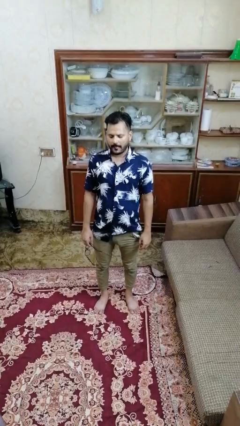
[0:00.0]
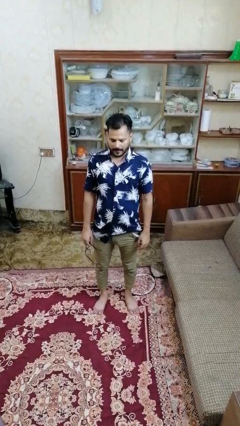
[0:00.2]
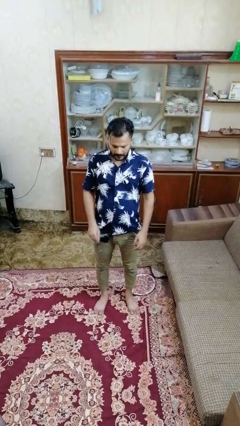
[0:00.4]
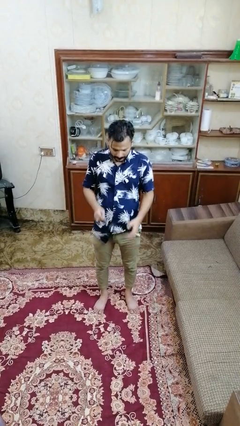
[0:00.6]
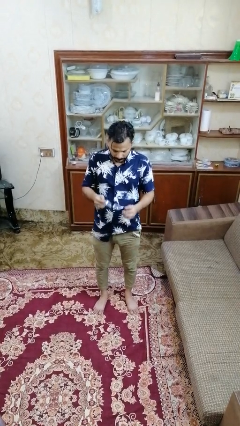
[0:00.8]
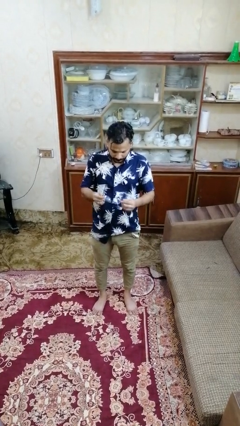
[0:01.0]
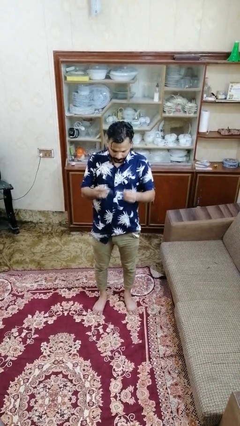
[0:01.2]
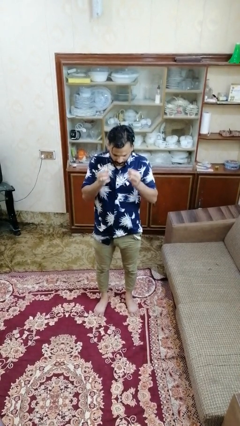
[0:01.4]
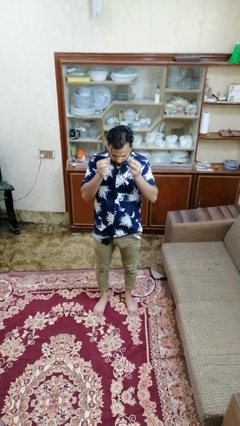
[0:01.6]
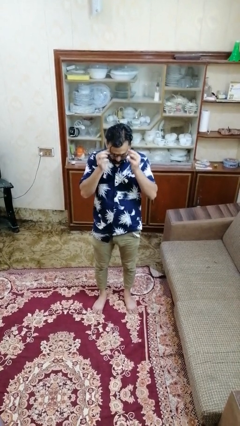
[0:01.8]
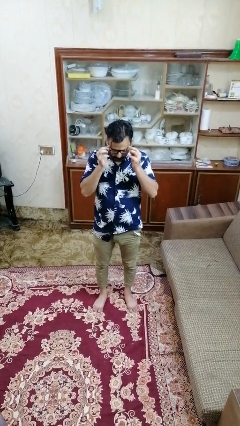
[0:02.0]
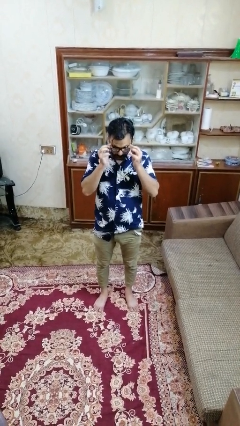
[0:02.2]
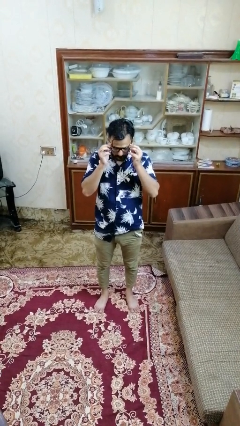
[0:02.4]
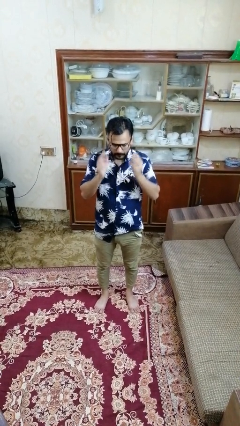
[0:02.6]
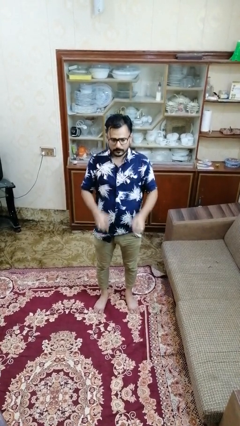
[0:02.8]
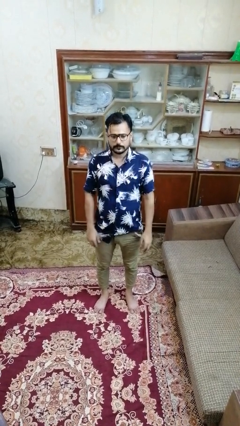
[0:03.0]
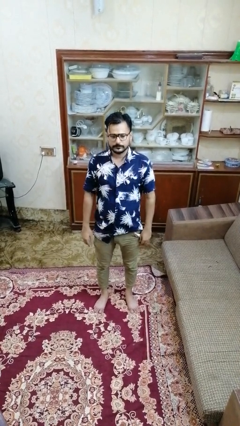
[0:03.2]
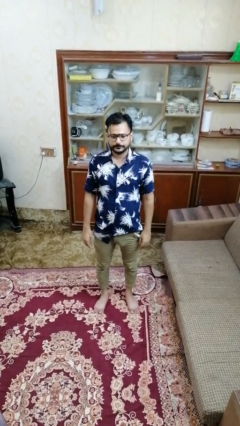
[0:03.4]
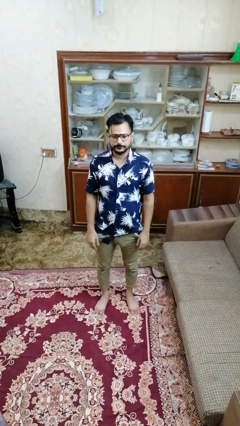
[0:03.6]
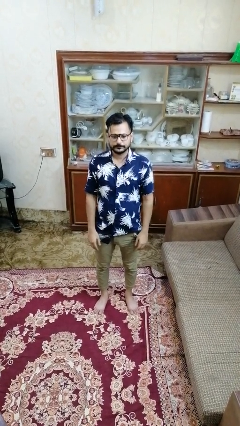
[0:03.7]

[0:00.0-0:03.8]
person puts on glasses

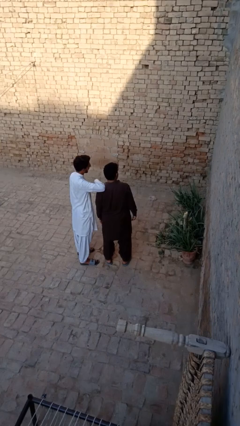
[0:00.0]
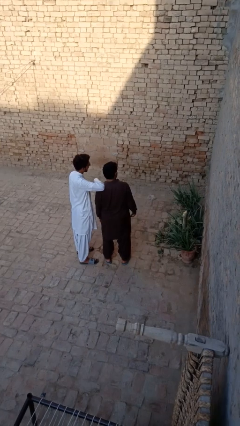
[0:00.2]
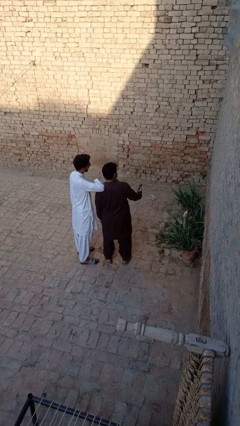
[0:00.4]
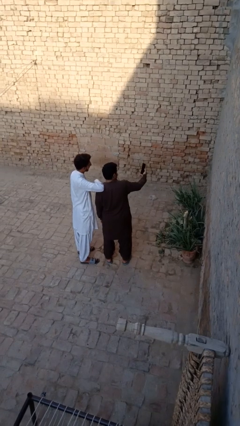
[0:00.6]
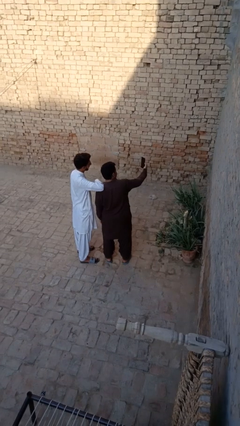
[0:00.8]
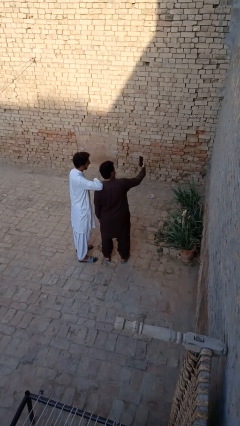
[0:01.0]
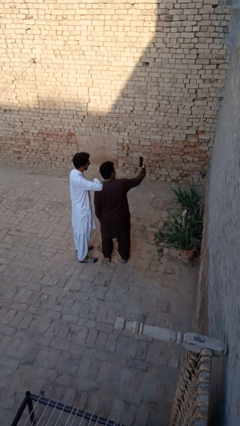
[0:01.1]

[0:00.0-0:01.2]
person takes selfie with person

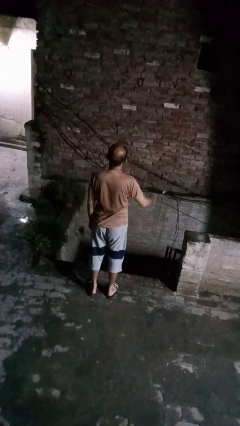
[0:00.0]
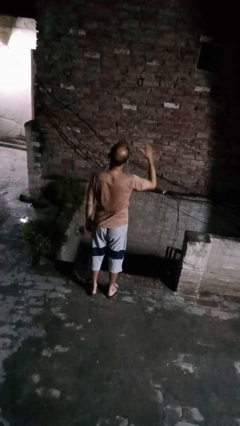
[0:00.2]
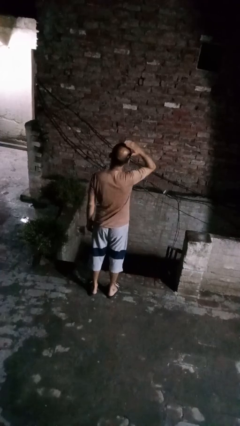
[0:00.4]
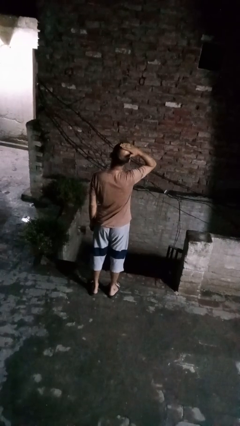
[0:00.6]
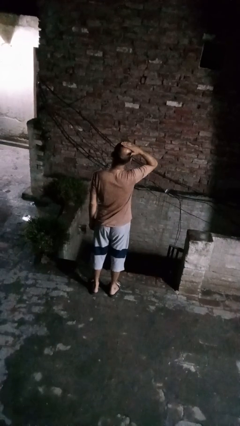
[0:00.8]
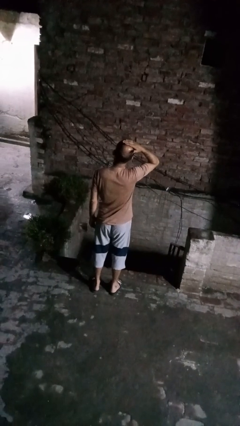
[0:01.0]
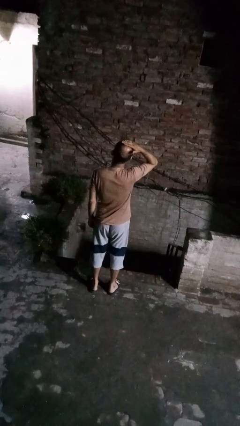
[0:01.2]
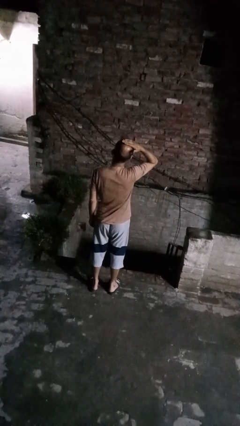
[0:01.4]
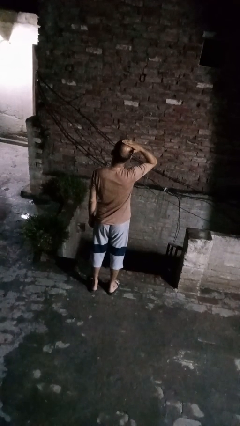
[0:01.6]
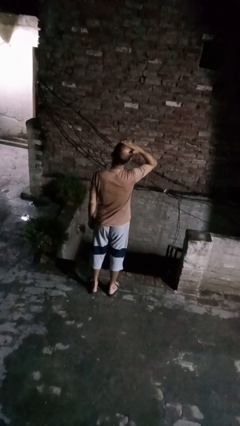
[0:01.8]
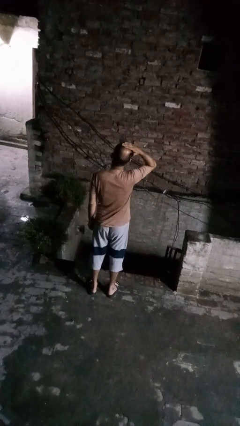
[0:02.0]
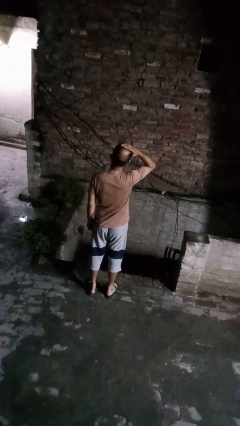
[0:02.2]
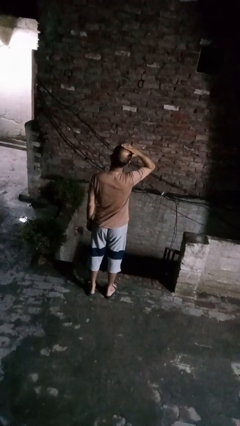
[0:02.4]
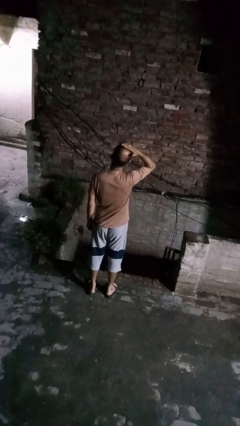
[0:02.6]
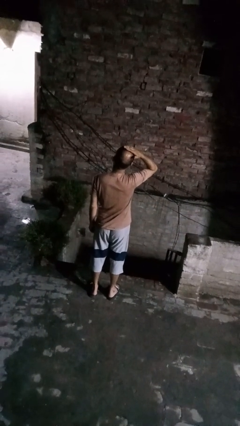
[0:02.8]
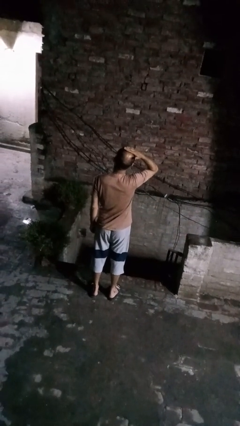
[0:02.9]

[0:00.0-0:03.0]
person pats head

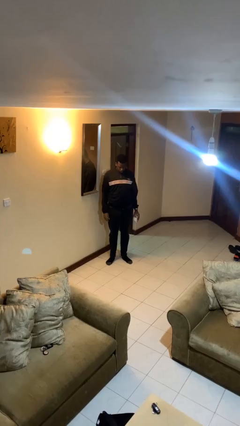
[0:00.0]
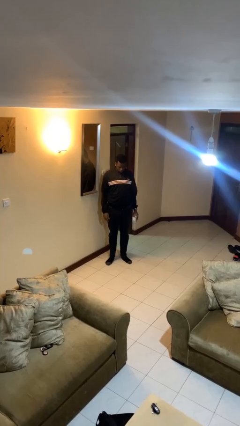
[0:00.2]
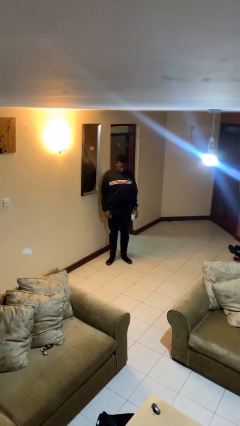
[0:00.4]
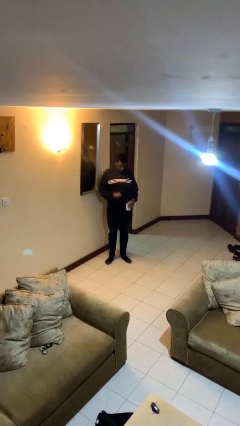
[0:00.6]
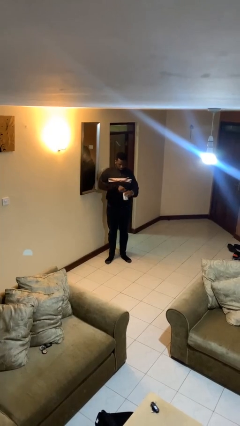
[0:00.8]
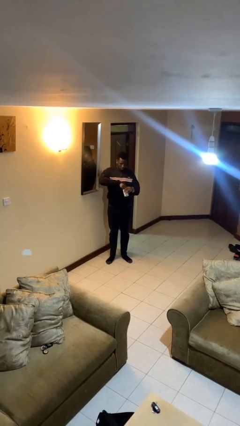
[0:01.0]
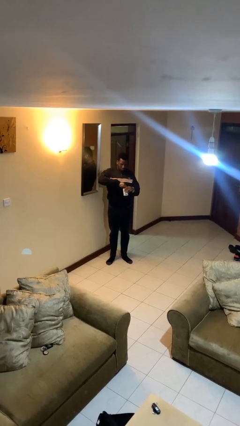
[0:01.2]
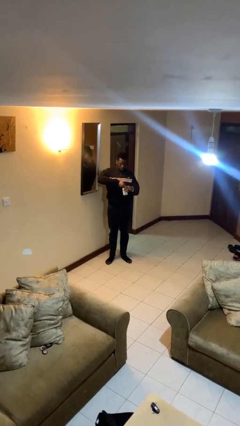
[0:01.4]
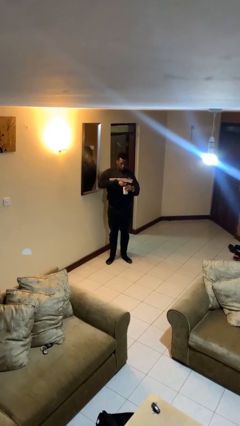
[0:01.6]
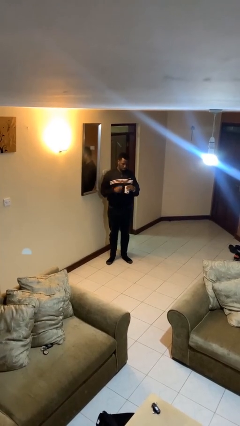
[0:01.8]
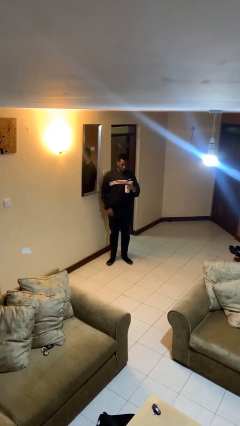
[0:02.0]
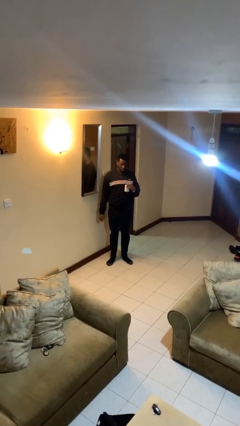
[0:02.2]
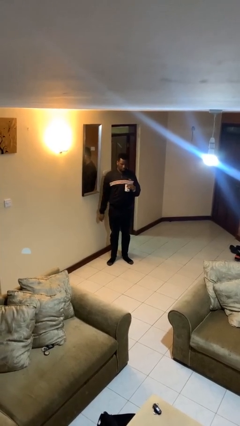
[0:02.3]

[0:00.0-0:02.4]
person opens beverage can

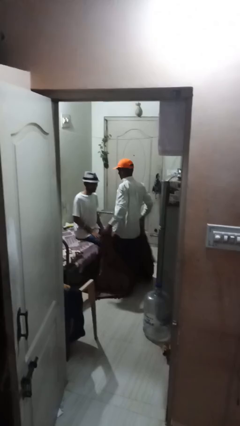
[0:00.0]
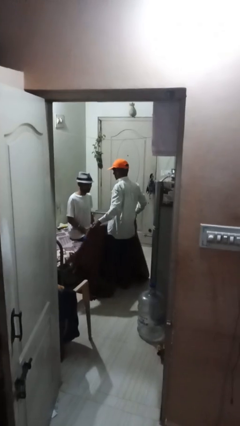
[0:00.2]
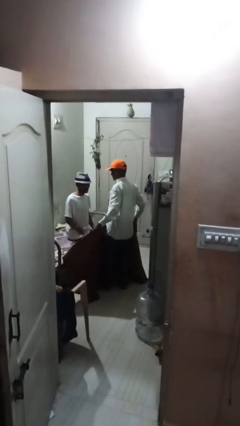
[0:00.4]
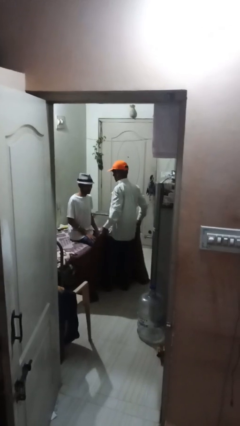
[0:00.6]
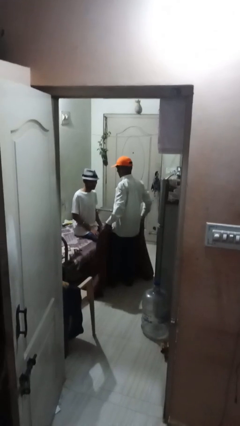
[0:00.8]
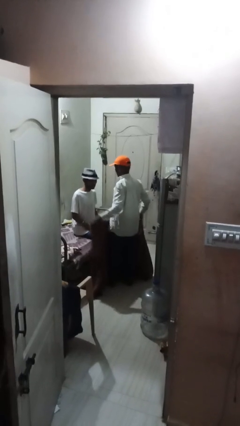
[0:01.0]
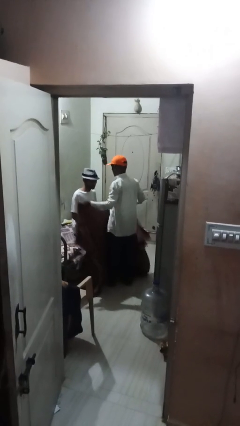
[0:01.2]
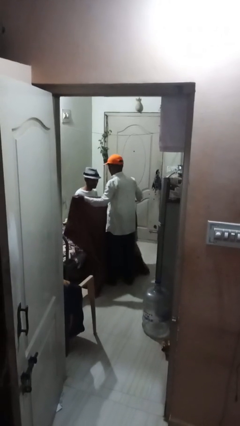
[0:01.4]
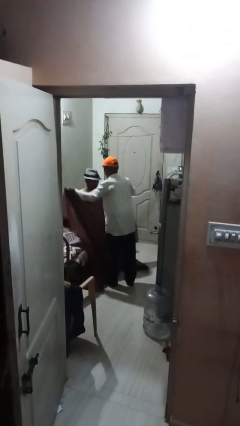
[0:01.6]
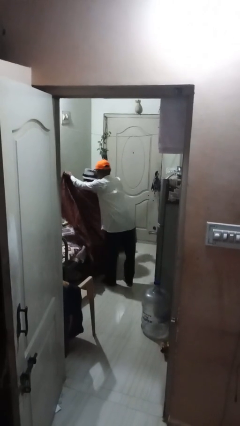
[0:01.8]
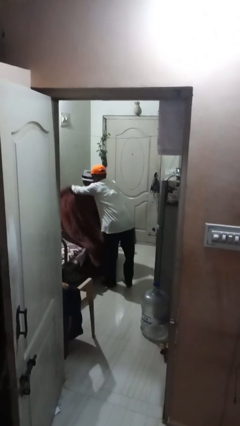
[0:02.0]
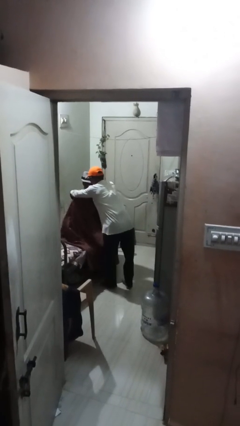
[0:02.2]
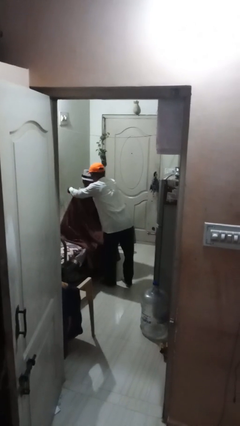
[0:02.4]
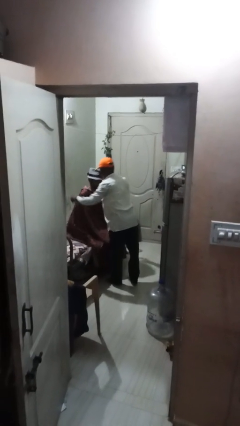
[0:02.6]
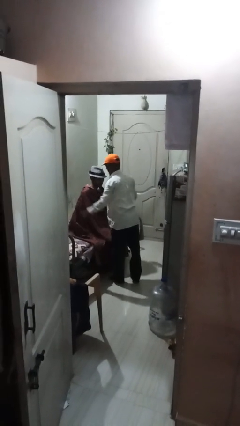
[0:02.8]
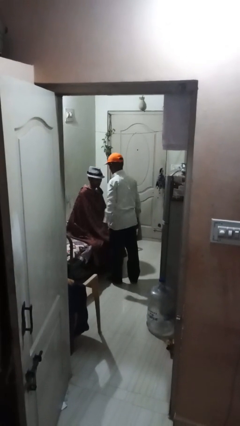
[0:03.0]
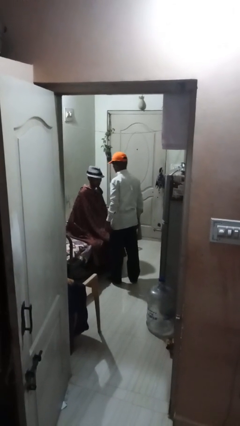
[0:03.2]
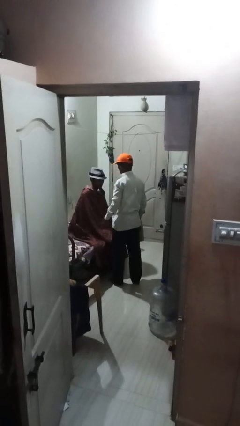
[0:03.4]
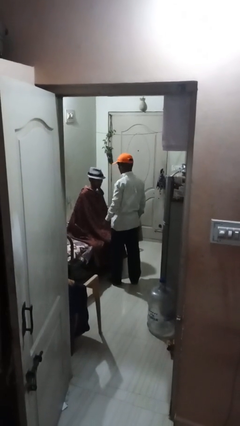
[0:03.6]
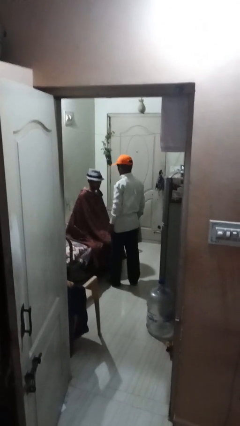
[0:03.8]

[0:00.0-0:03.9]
person uncovers friend with blanket

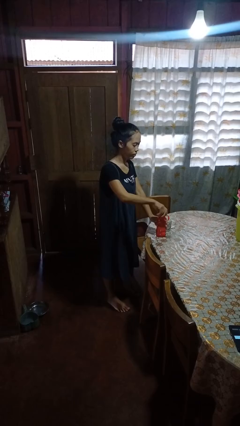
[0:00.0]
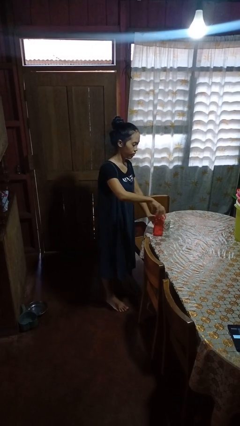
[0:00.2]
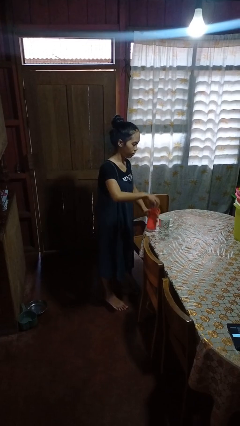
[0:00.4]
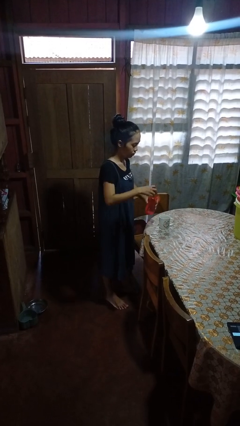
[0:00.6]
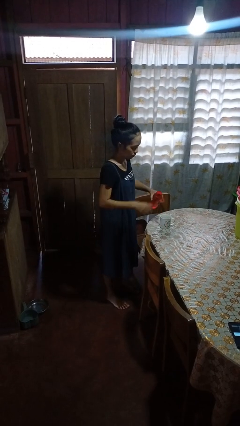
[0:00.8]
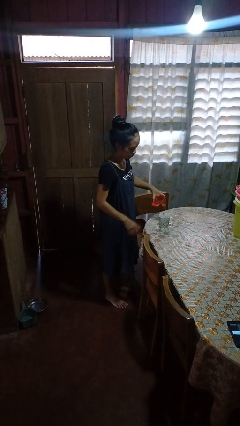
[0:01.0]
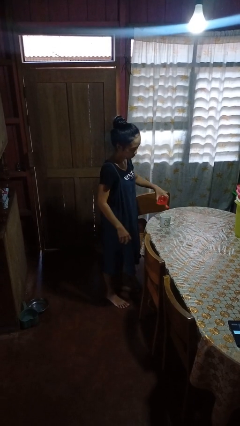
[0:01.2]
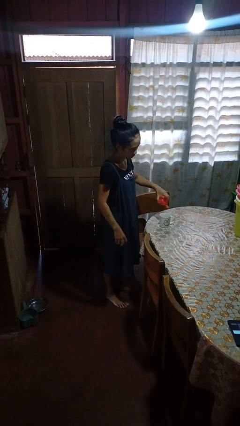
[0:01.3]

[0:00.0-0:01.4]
person unscrews lid from bottle

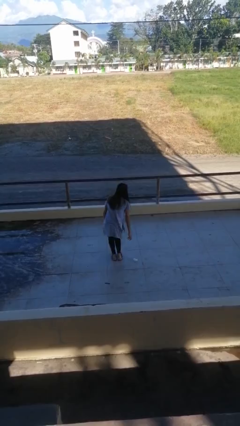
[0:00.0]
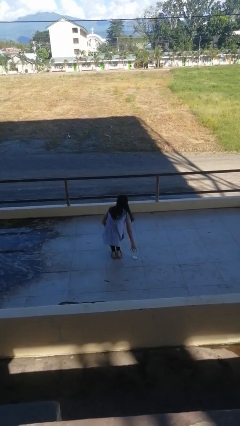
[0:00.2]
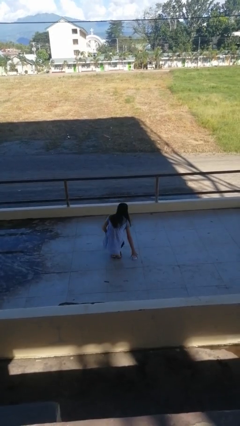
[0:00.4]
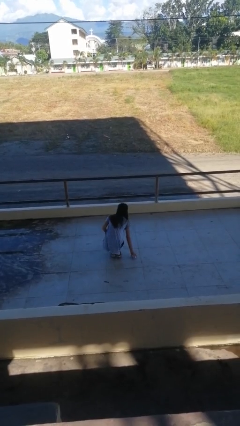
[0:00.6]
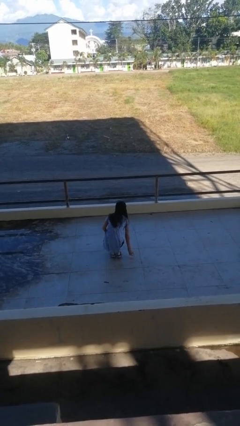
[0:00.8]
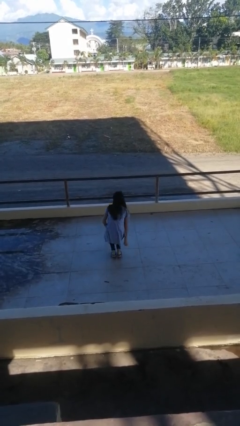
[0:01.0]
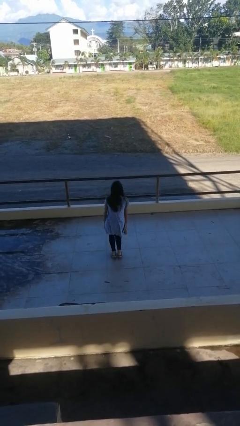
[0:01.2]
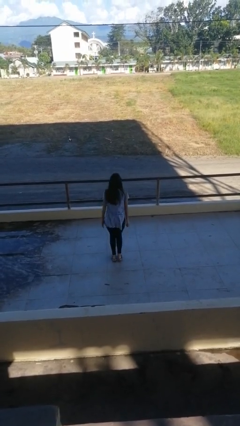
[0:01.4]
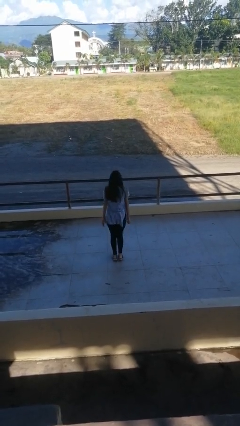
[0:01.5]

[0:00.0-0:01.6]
person picks up object from floor
